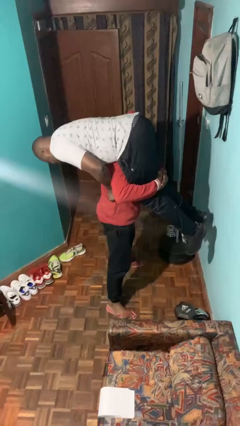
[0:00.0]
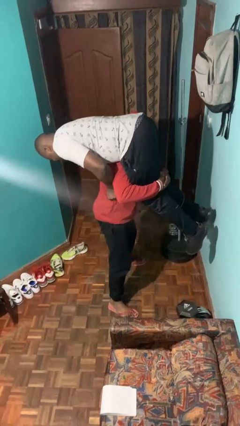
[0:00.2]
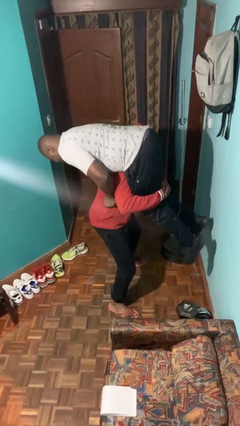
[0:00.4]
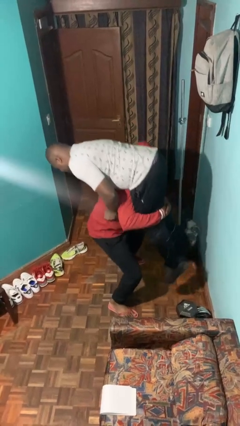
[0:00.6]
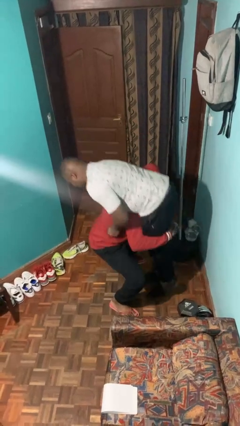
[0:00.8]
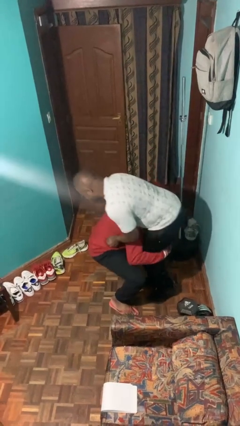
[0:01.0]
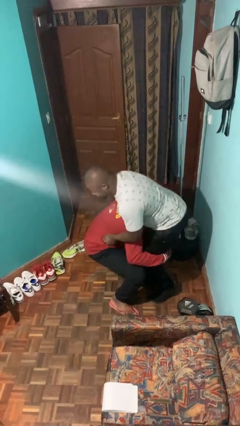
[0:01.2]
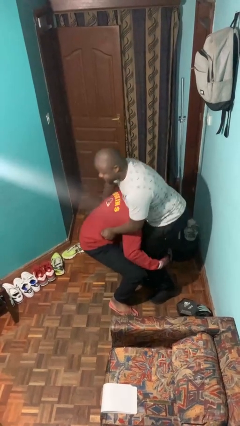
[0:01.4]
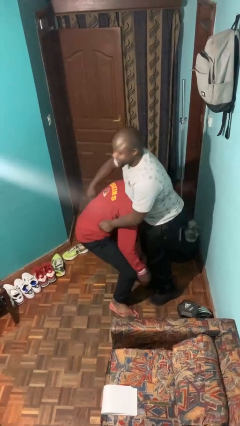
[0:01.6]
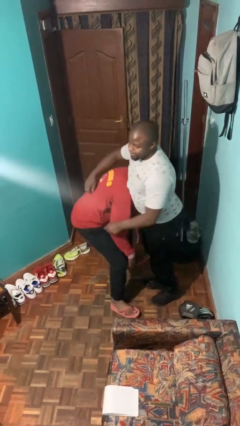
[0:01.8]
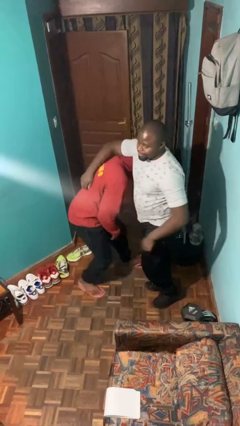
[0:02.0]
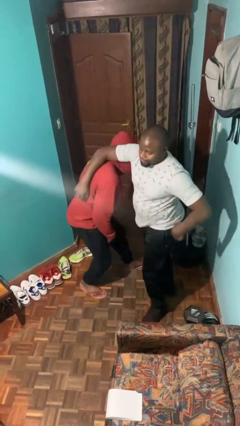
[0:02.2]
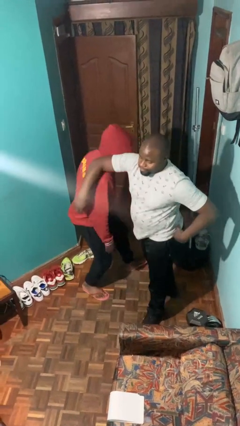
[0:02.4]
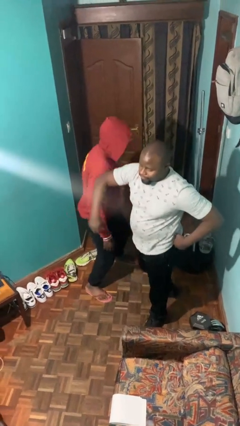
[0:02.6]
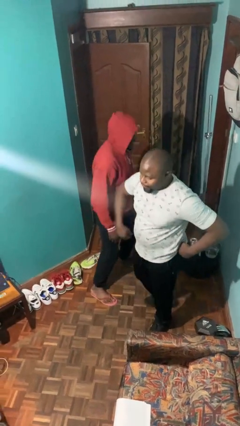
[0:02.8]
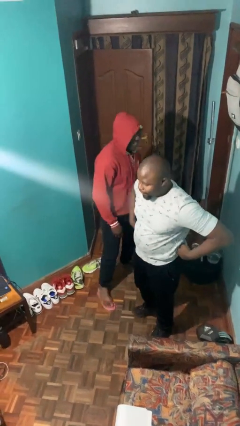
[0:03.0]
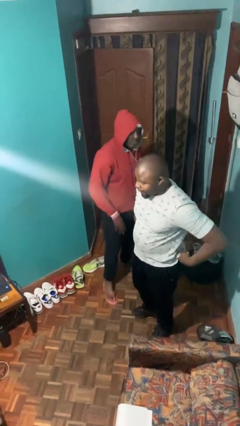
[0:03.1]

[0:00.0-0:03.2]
person puts down person

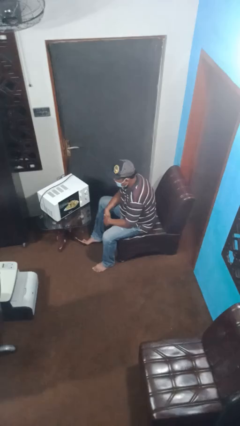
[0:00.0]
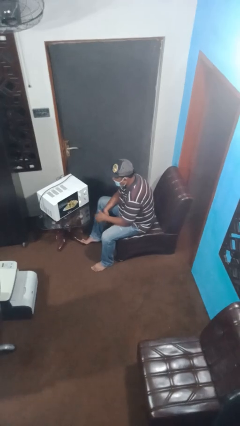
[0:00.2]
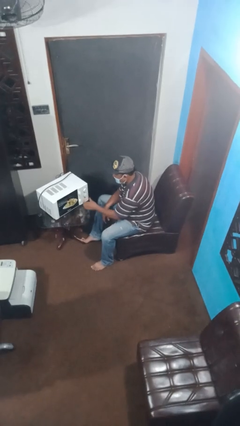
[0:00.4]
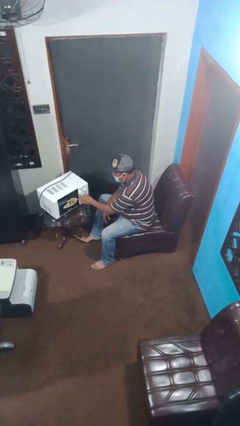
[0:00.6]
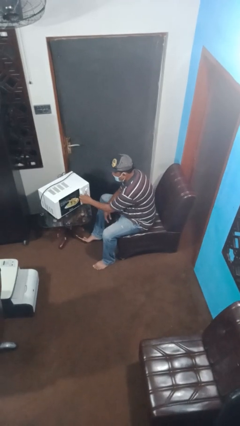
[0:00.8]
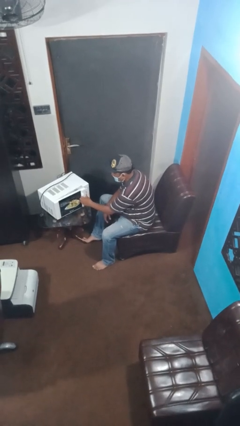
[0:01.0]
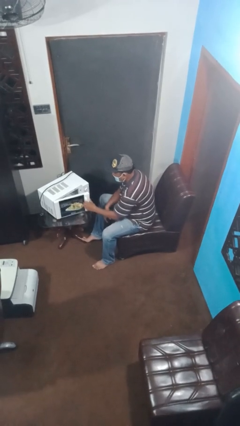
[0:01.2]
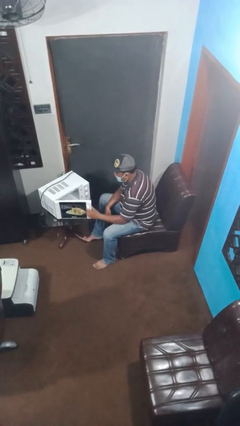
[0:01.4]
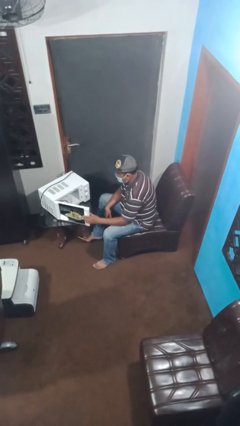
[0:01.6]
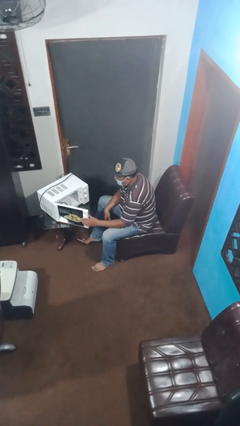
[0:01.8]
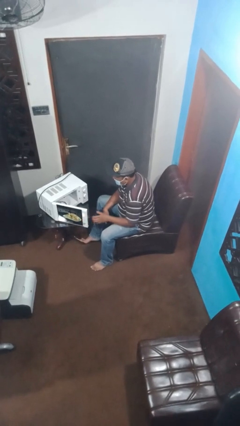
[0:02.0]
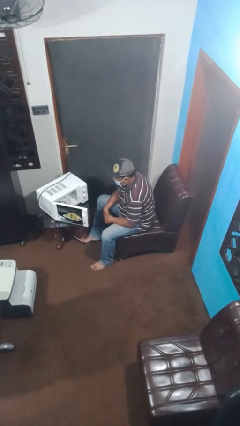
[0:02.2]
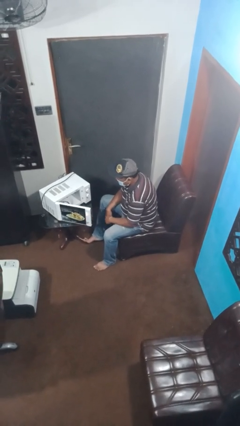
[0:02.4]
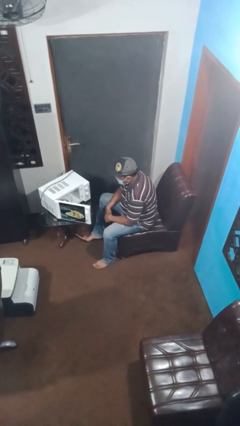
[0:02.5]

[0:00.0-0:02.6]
person opens microwave

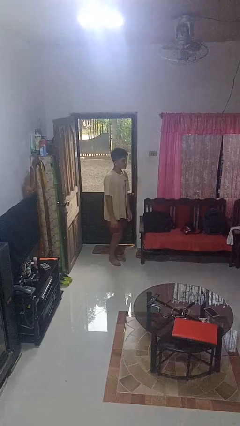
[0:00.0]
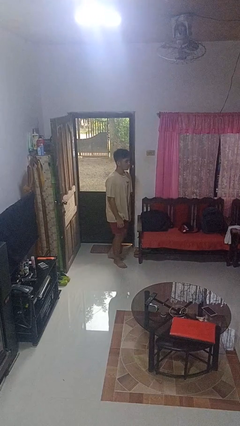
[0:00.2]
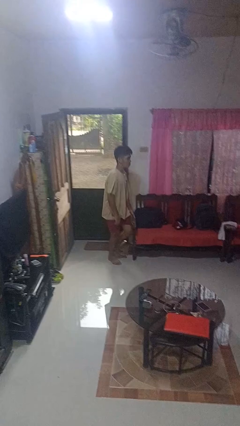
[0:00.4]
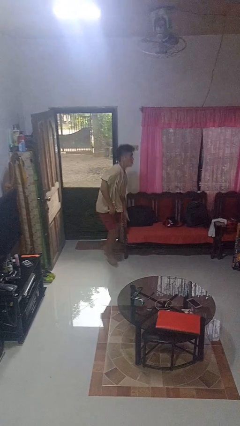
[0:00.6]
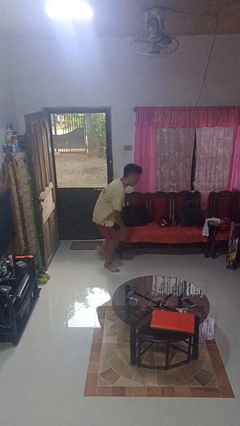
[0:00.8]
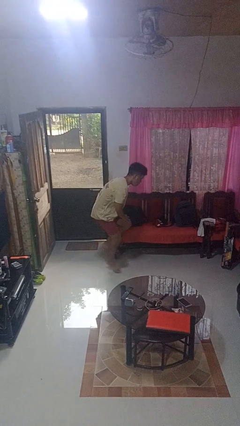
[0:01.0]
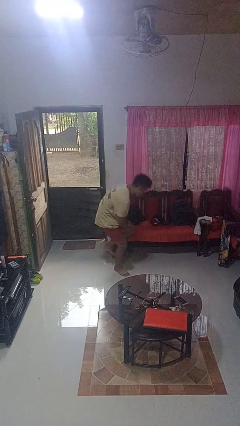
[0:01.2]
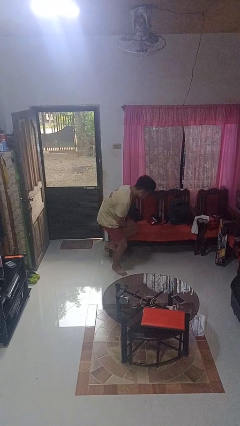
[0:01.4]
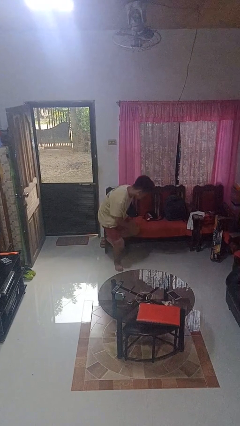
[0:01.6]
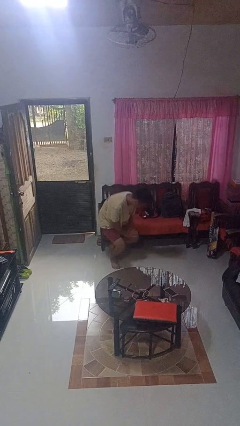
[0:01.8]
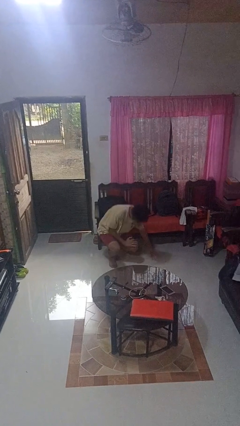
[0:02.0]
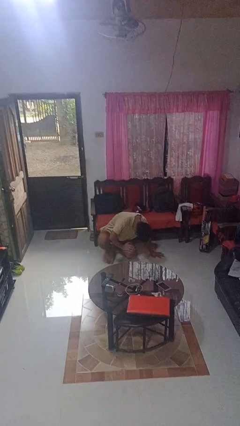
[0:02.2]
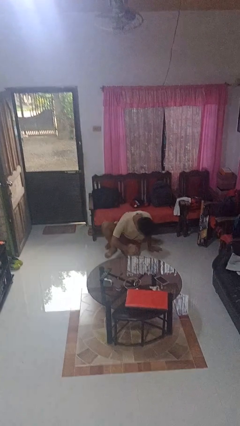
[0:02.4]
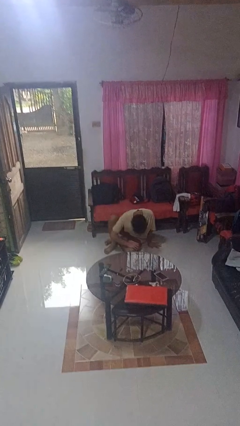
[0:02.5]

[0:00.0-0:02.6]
person trips on object on floor

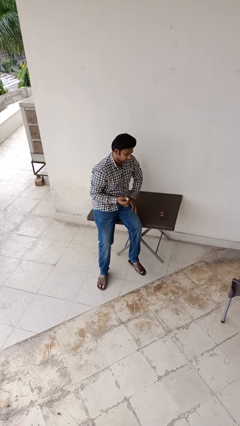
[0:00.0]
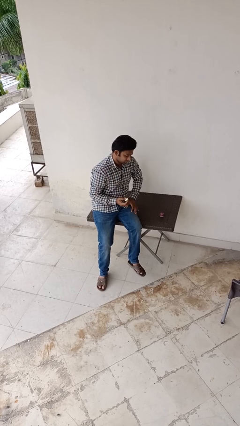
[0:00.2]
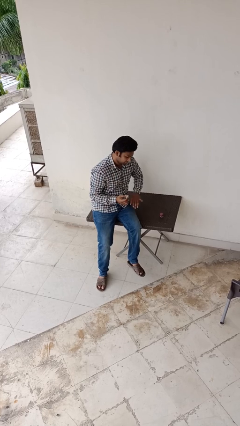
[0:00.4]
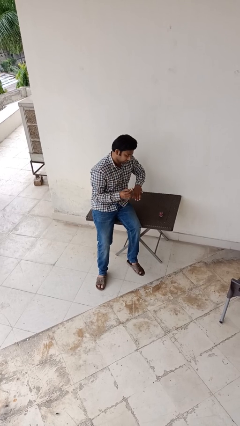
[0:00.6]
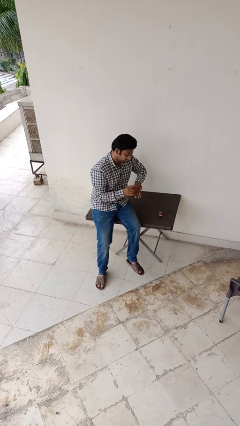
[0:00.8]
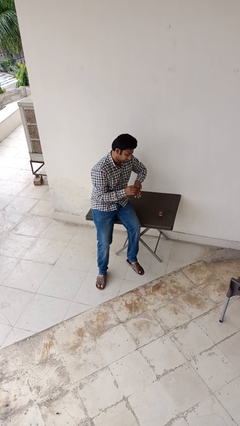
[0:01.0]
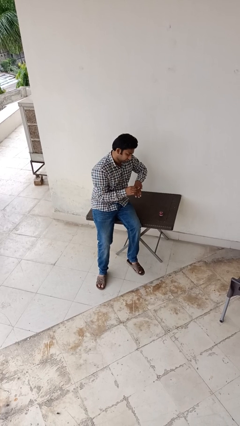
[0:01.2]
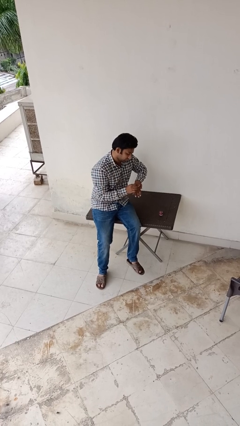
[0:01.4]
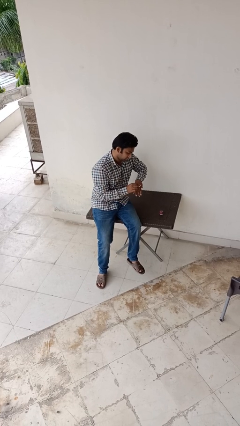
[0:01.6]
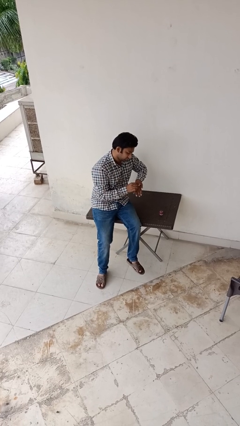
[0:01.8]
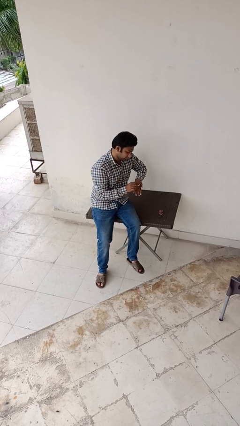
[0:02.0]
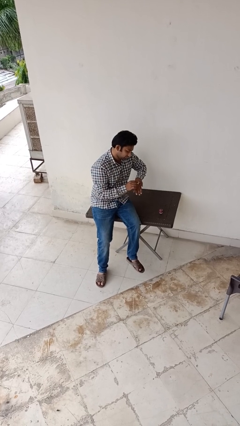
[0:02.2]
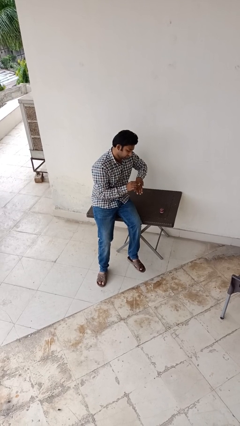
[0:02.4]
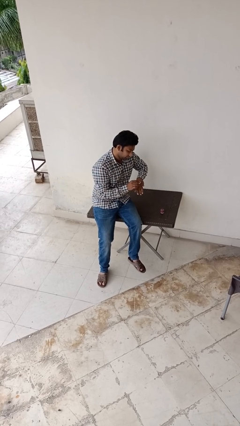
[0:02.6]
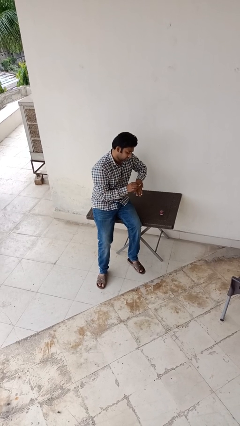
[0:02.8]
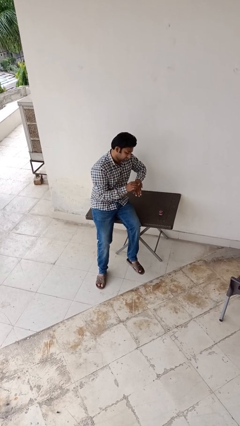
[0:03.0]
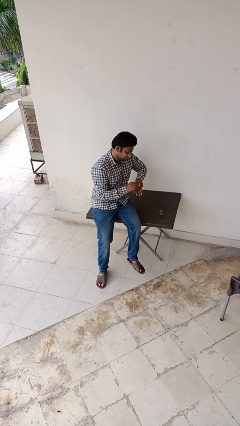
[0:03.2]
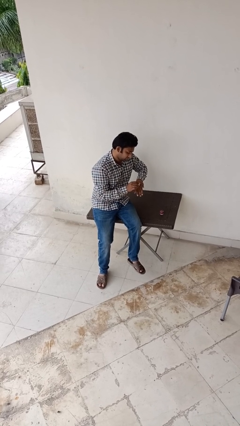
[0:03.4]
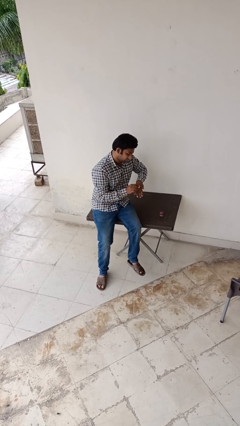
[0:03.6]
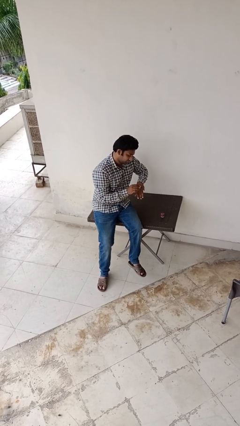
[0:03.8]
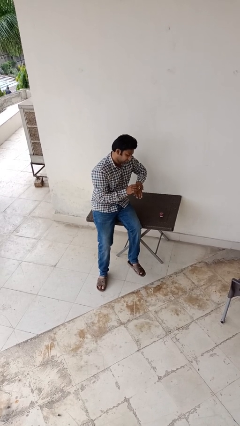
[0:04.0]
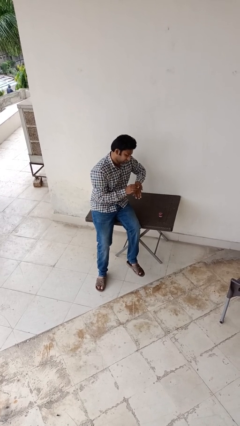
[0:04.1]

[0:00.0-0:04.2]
person paints fingernails

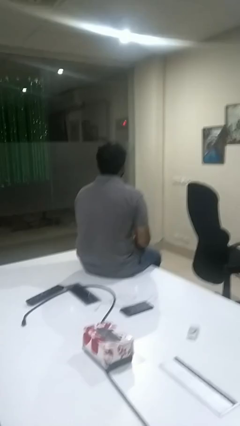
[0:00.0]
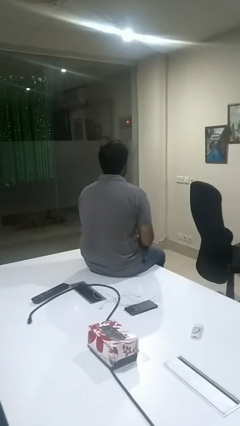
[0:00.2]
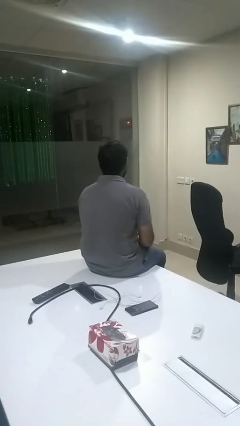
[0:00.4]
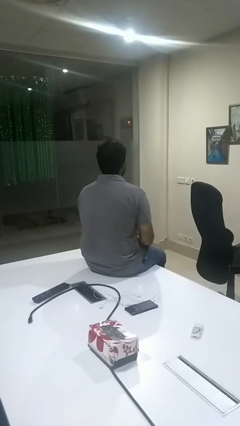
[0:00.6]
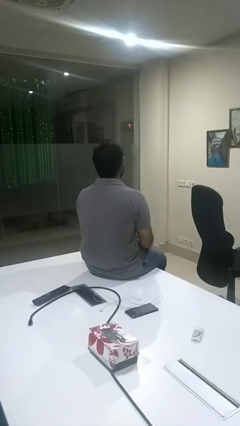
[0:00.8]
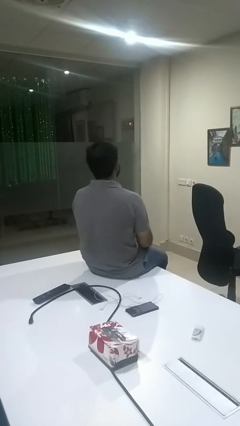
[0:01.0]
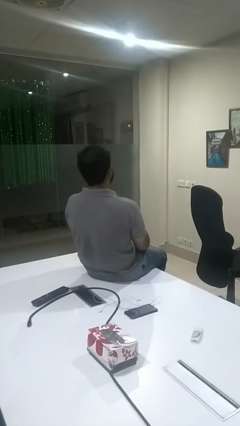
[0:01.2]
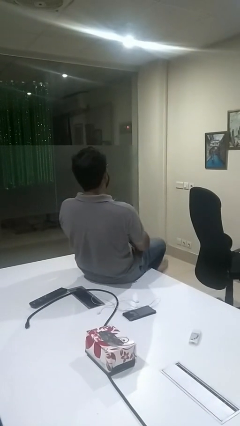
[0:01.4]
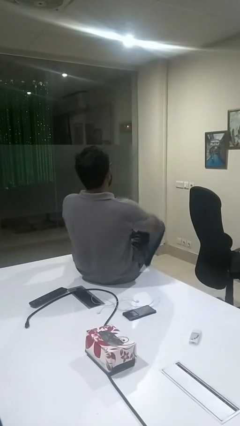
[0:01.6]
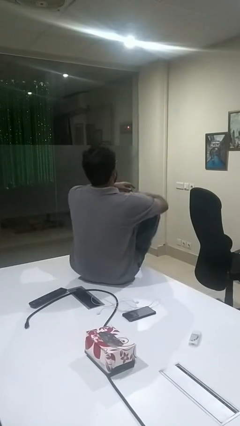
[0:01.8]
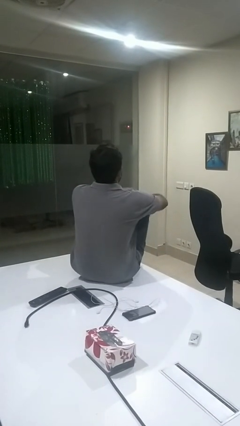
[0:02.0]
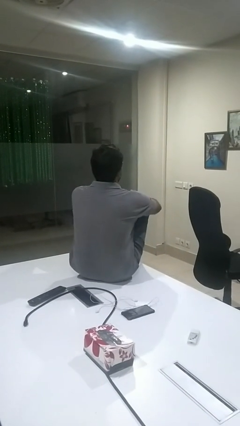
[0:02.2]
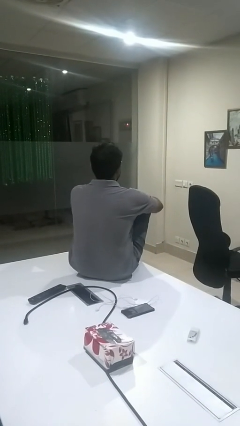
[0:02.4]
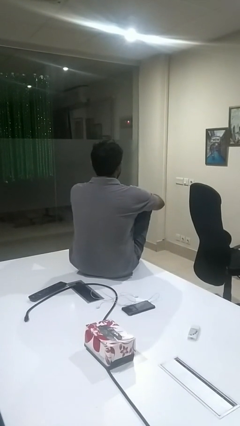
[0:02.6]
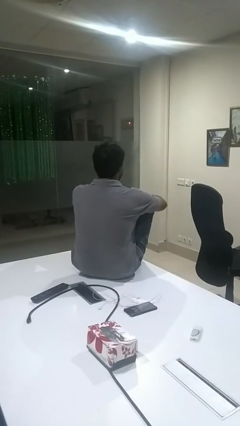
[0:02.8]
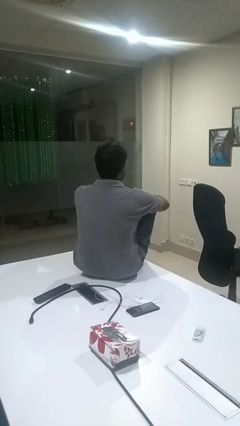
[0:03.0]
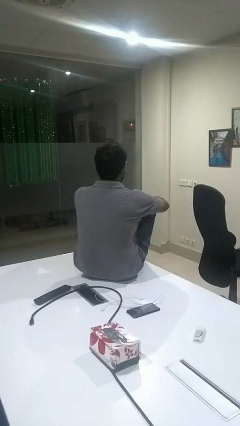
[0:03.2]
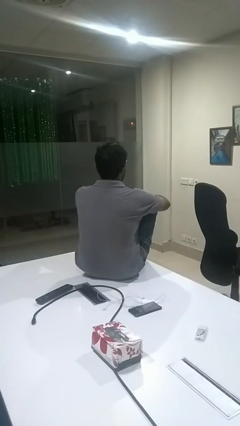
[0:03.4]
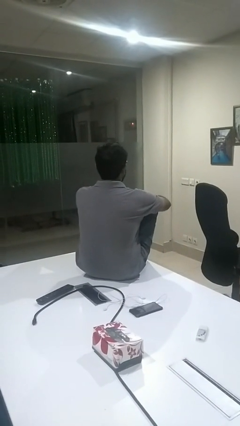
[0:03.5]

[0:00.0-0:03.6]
person puts feet up

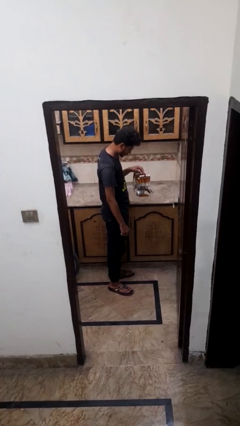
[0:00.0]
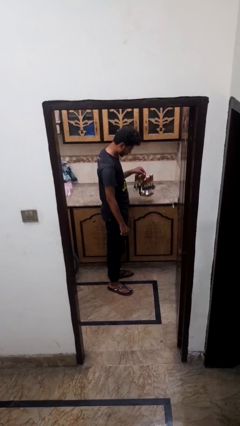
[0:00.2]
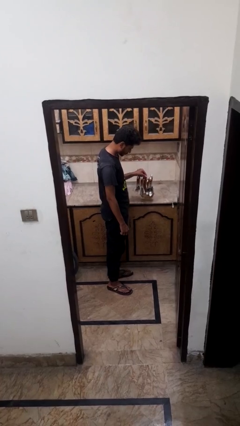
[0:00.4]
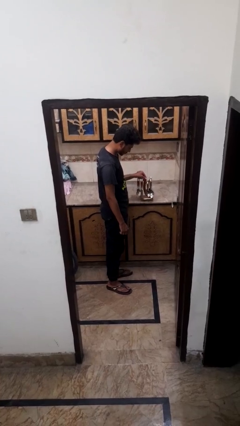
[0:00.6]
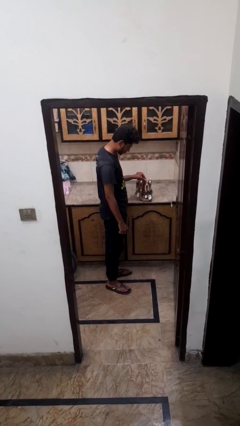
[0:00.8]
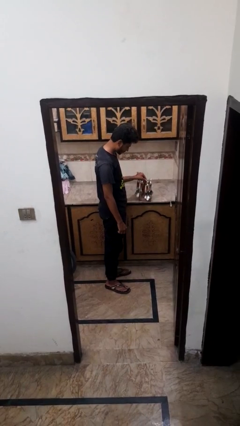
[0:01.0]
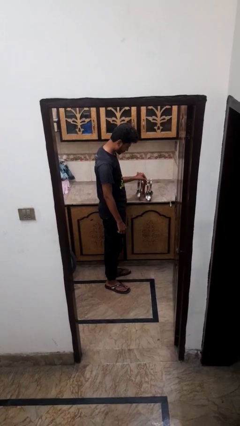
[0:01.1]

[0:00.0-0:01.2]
person puts down object on countertop
